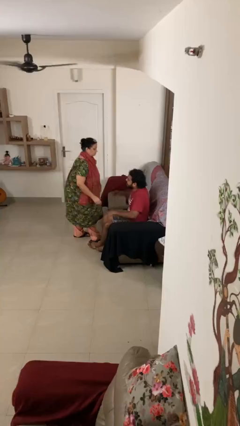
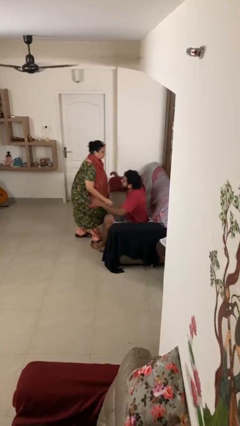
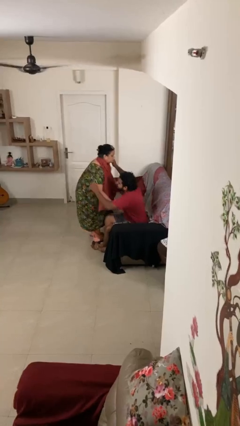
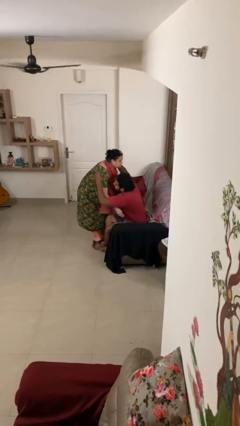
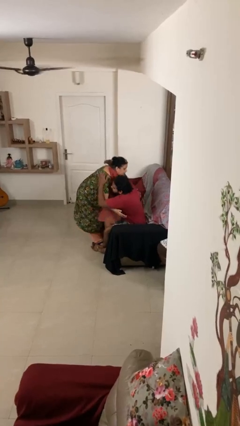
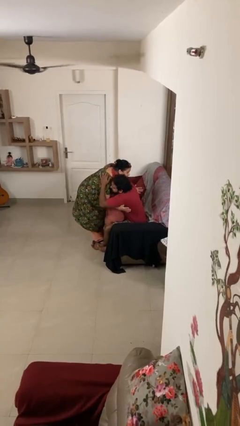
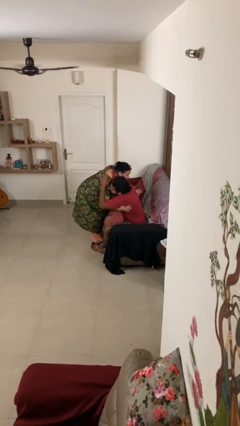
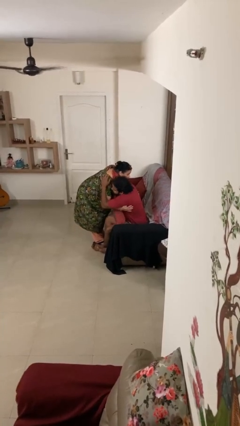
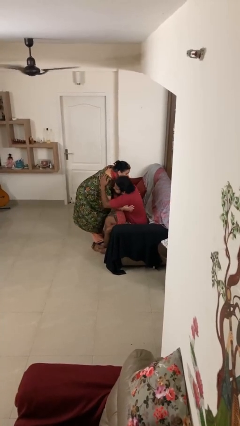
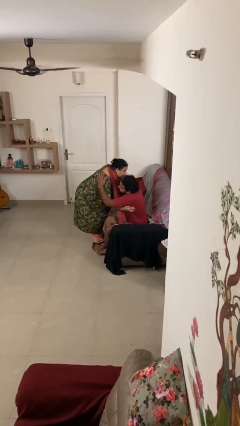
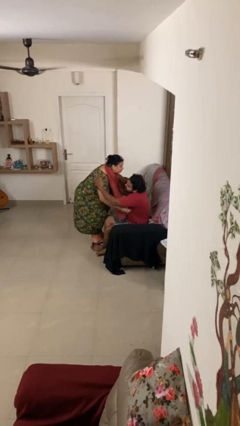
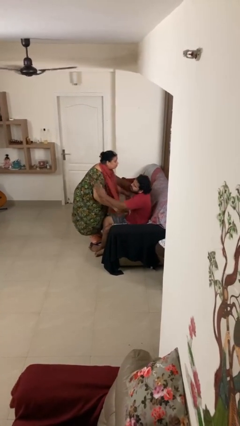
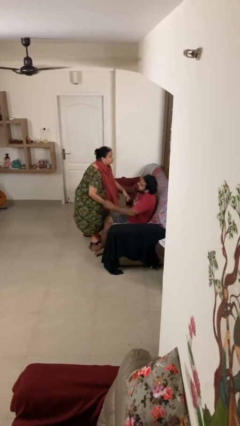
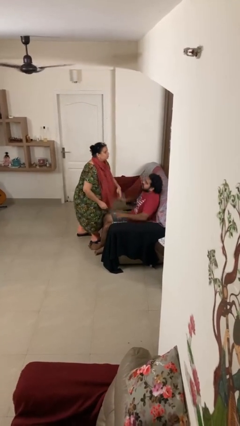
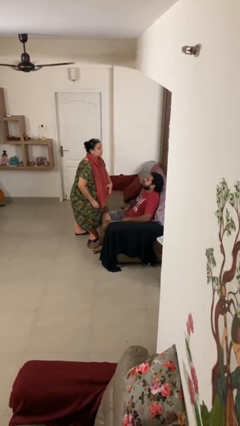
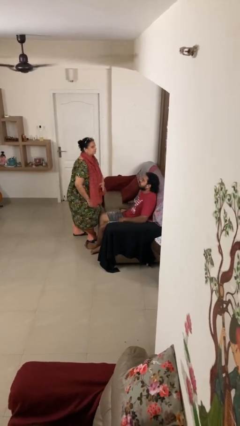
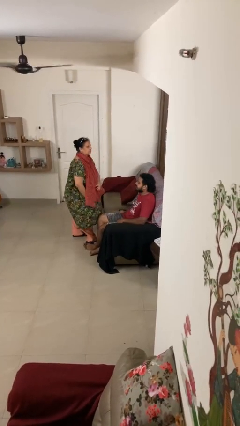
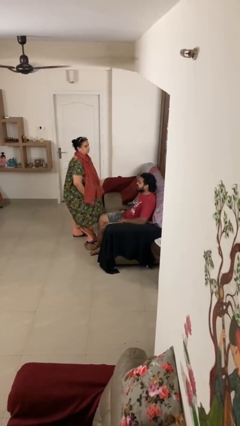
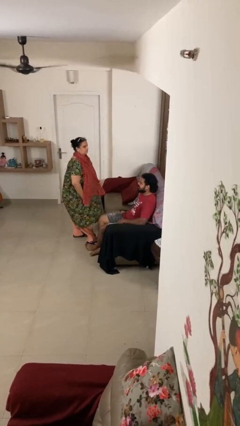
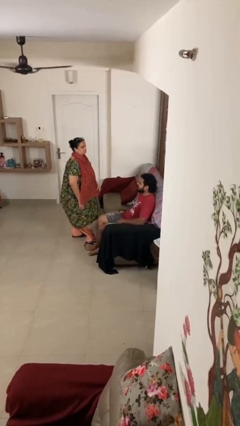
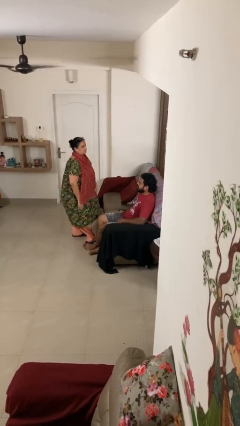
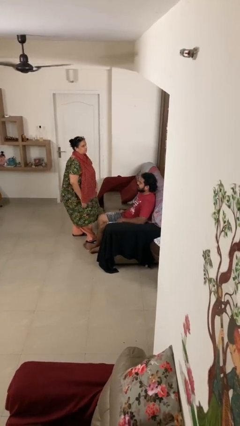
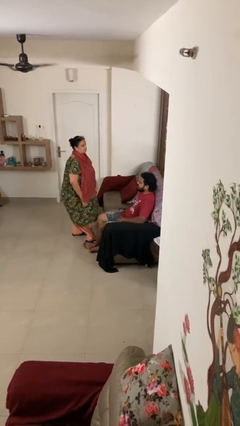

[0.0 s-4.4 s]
person embraces person

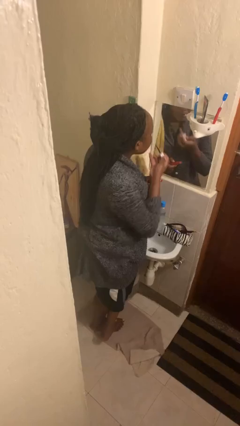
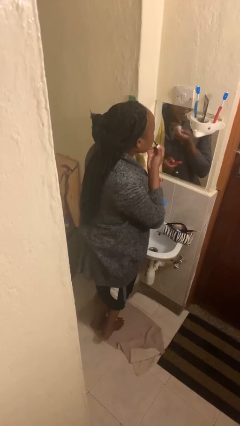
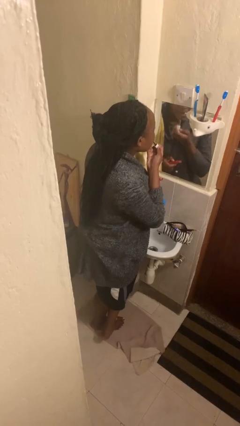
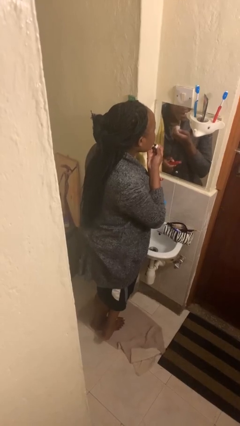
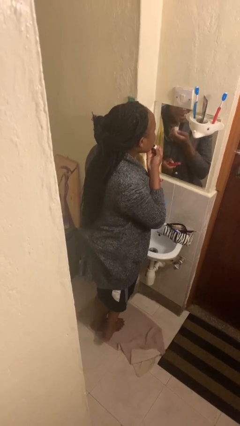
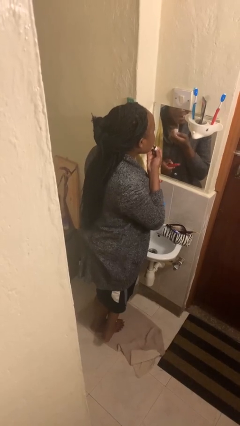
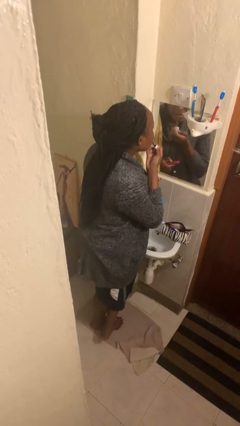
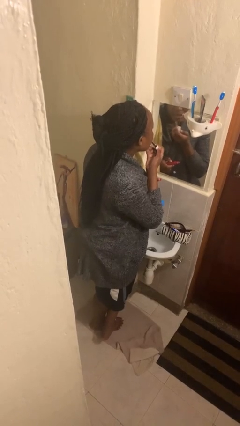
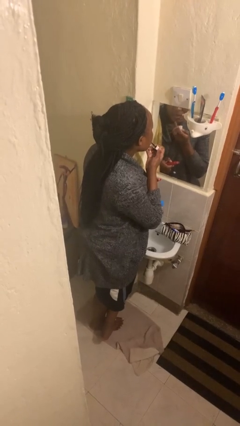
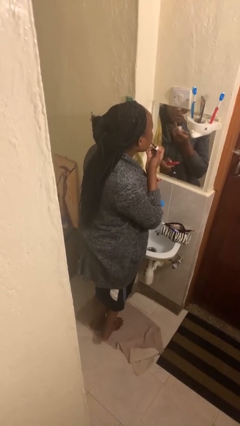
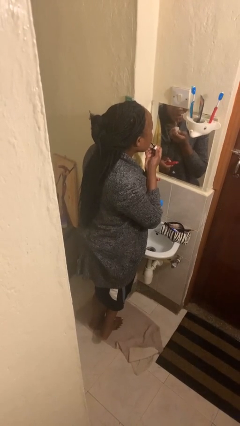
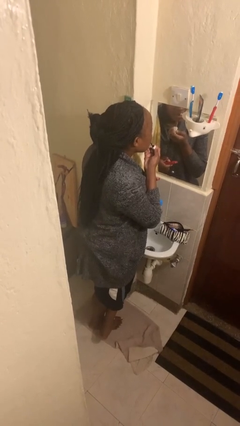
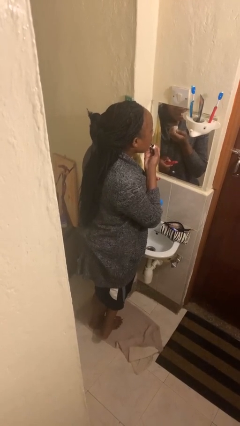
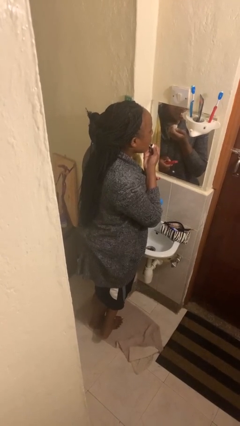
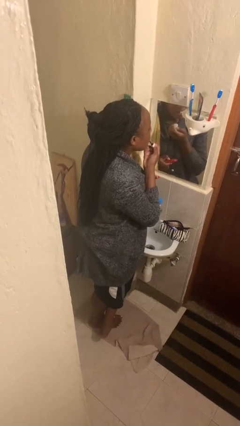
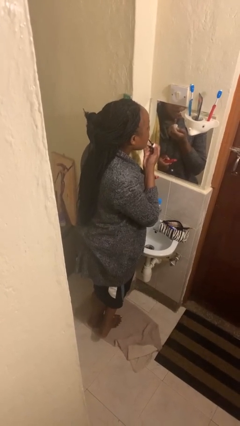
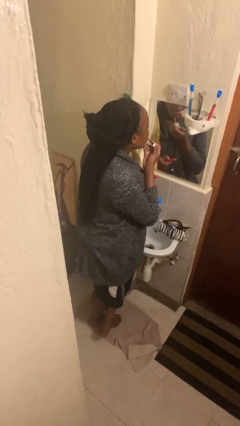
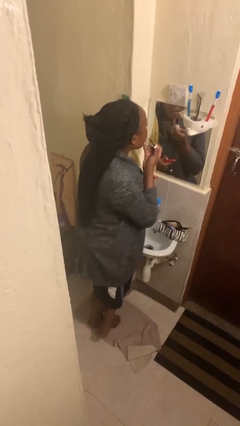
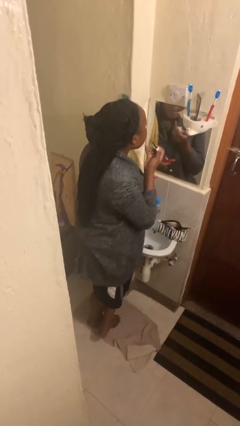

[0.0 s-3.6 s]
person applies lip makeup

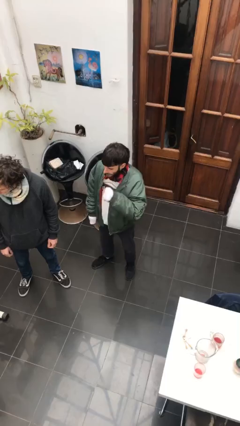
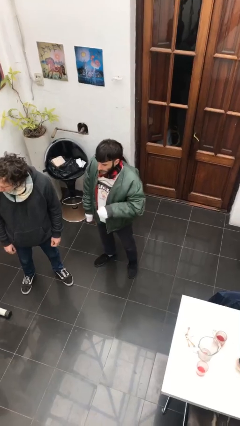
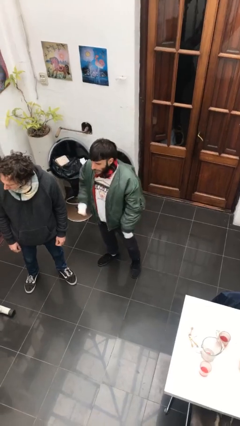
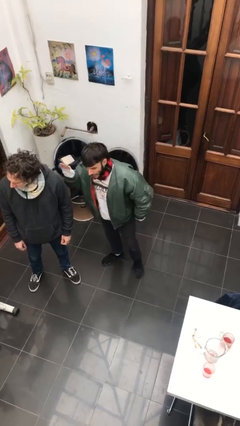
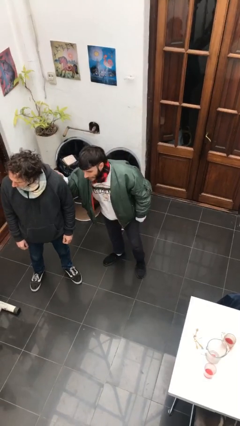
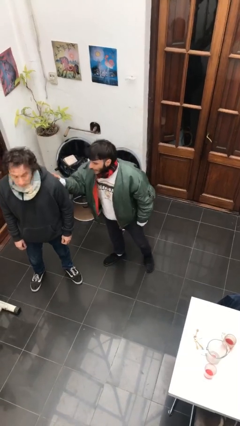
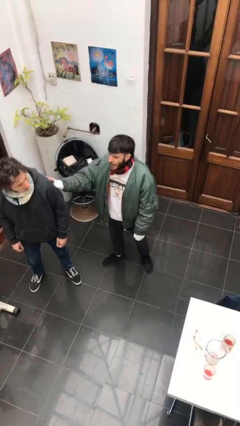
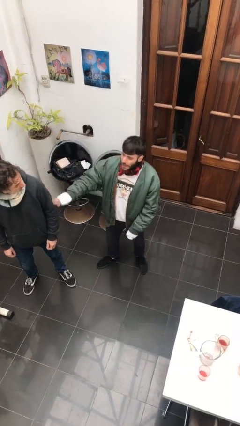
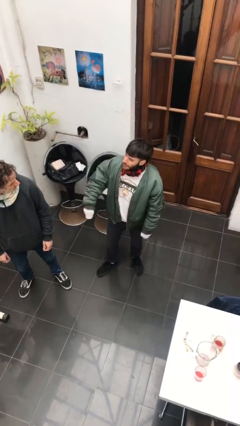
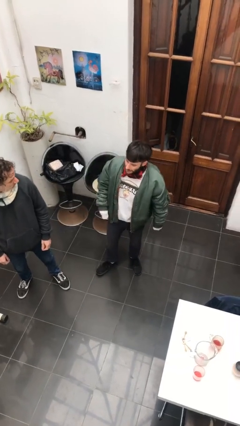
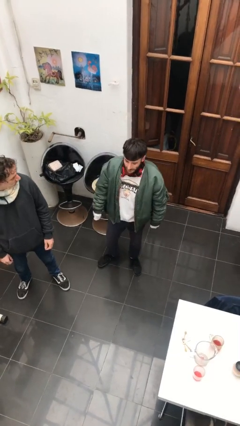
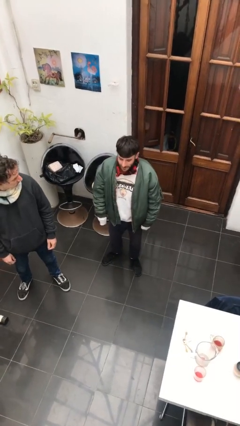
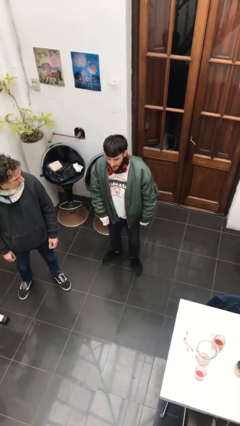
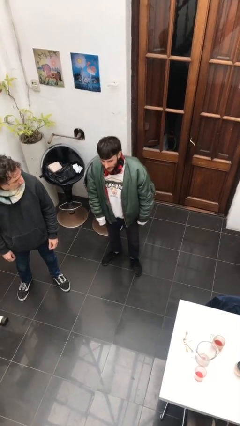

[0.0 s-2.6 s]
person shoves person

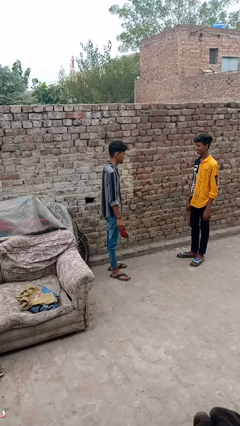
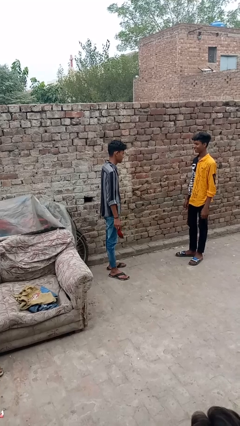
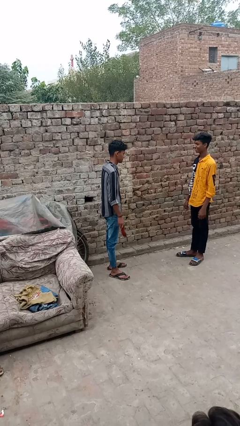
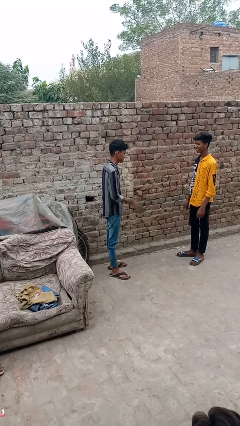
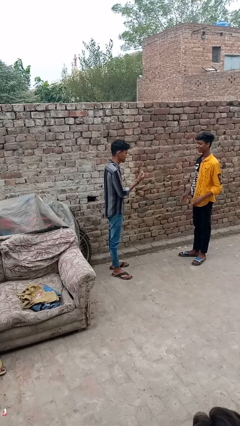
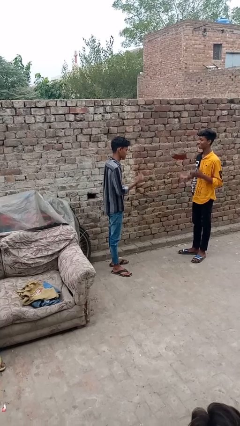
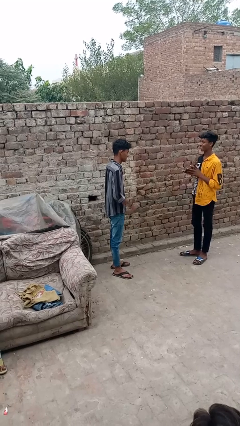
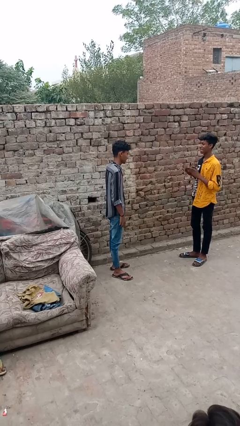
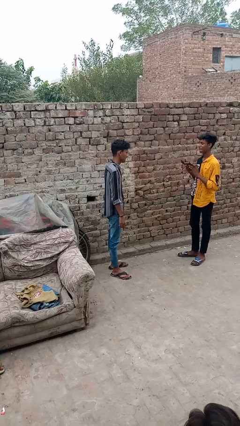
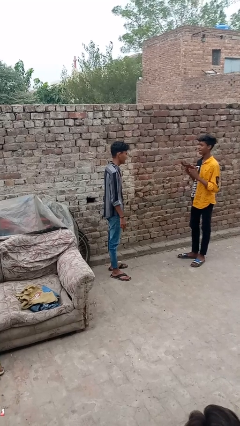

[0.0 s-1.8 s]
person throws object to person

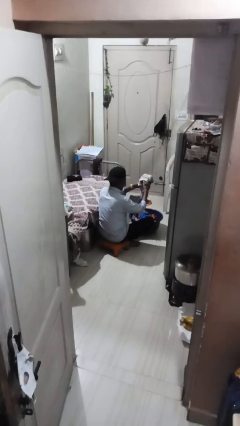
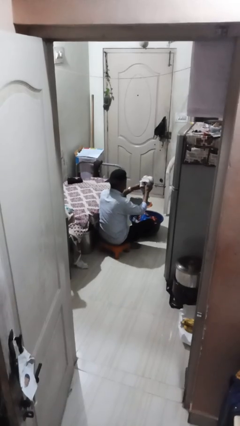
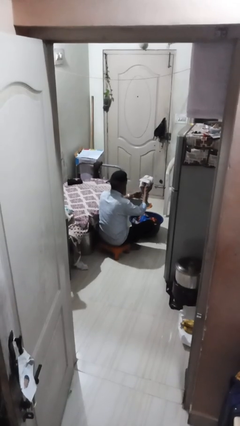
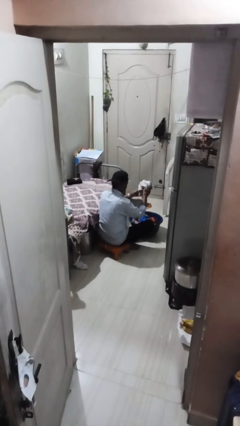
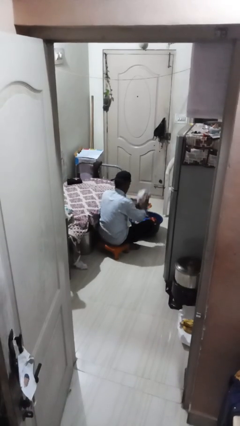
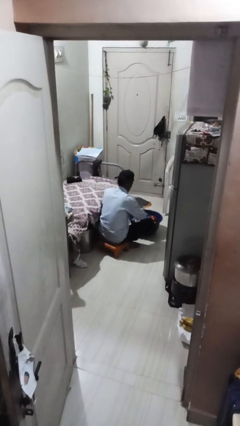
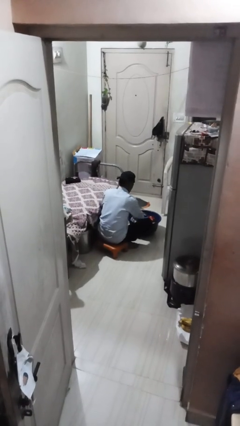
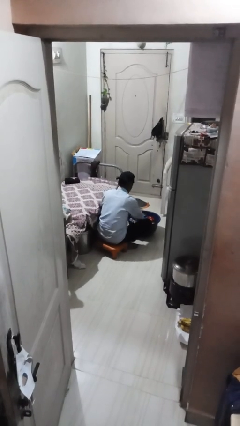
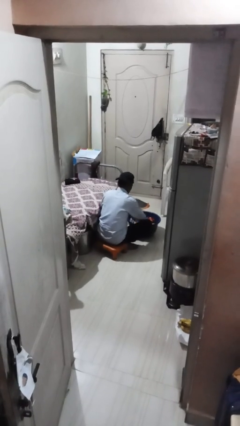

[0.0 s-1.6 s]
person puts object into basket

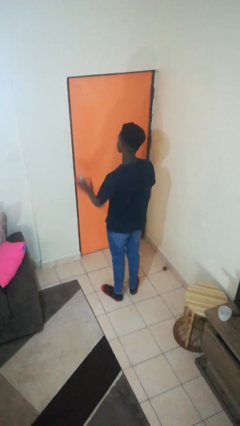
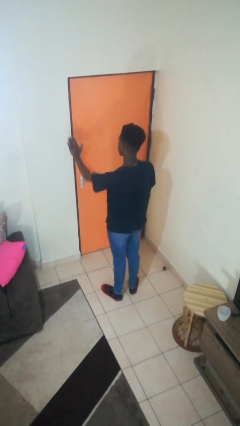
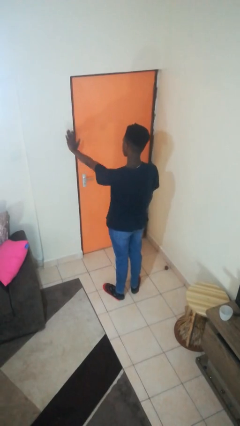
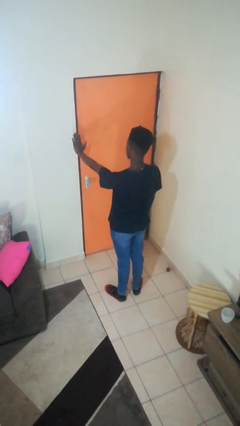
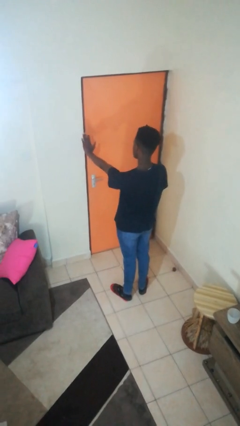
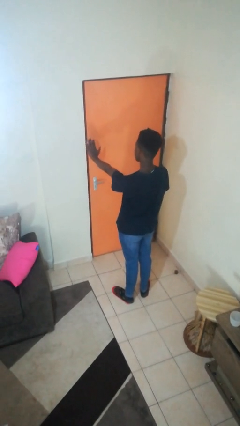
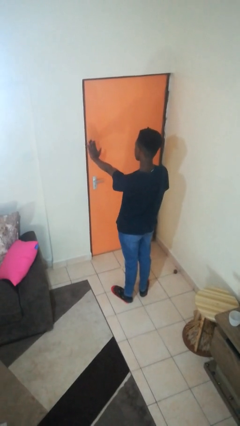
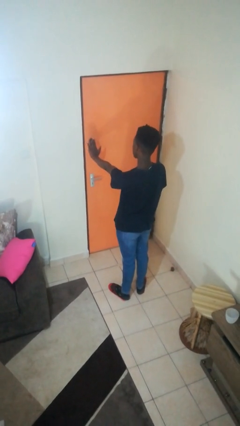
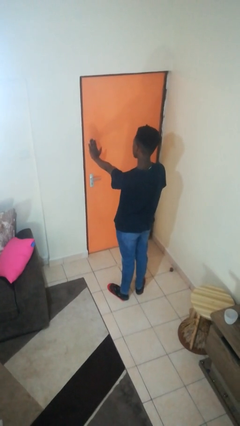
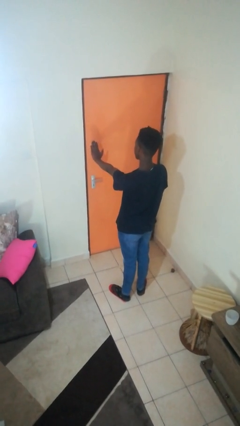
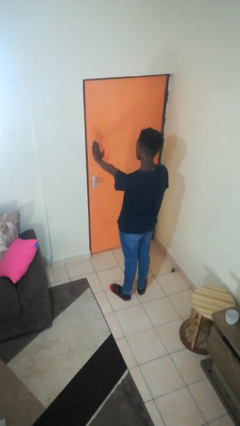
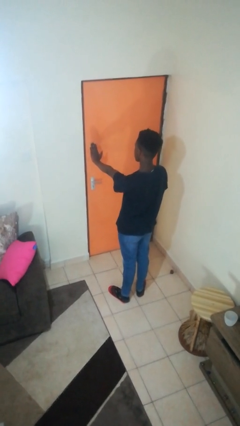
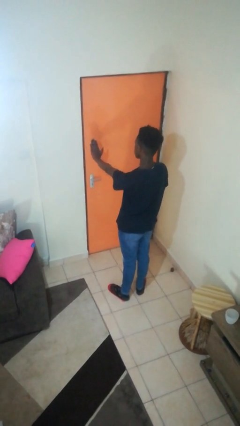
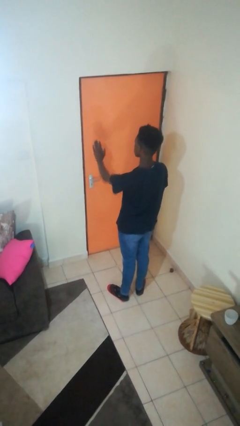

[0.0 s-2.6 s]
person gestures stop

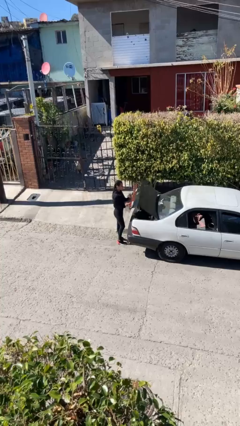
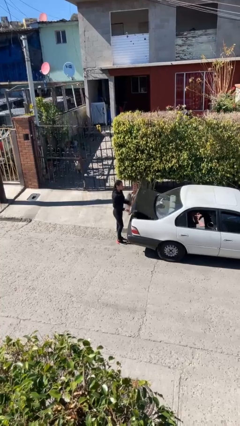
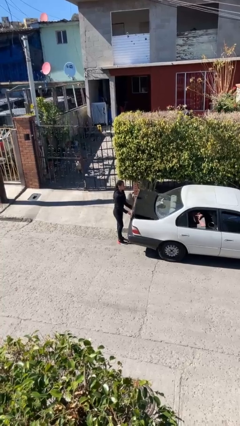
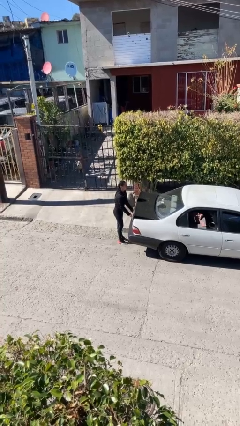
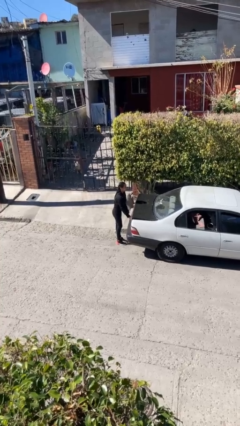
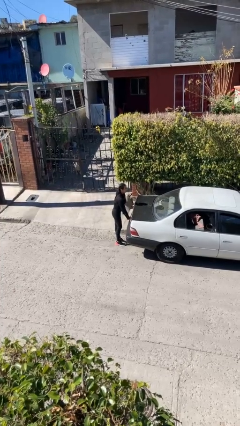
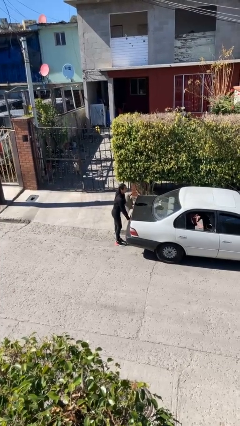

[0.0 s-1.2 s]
person closes car trunk
